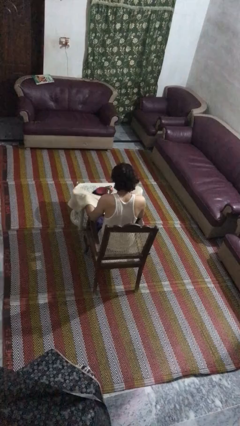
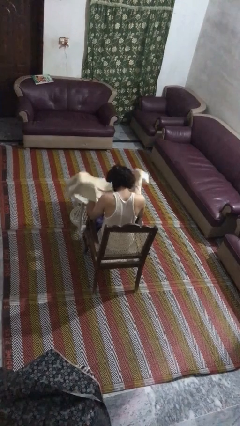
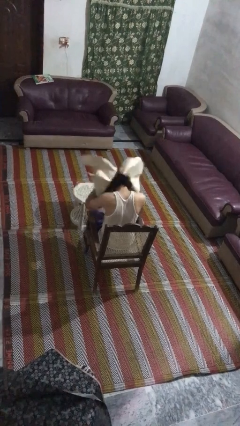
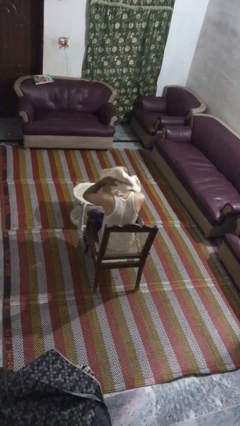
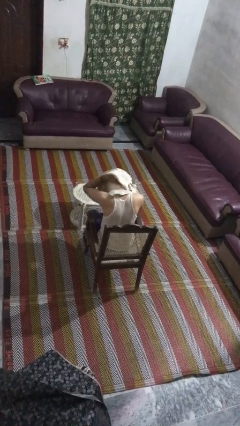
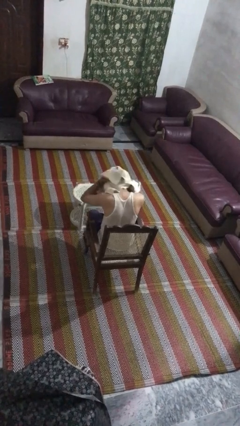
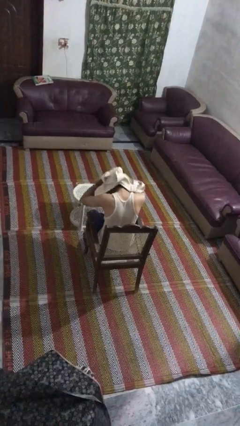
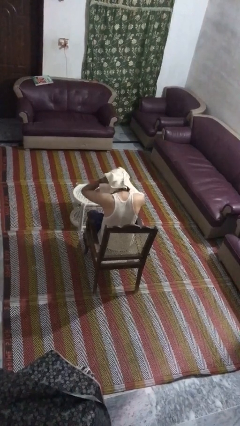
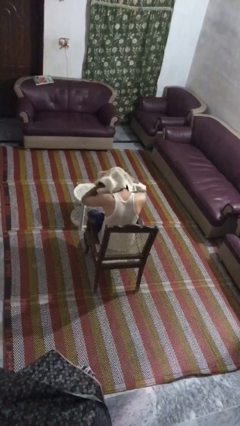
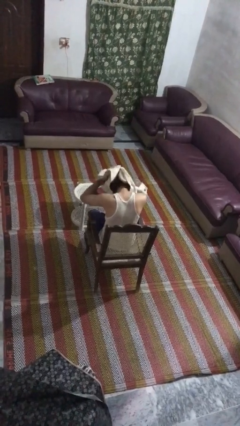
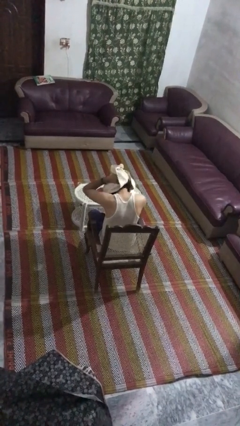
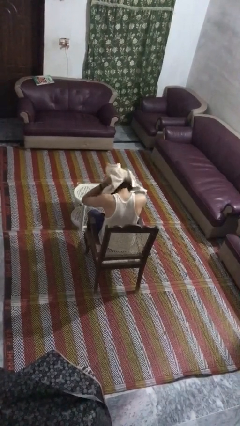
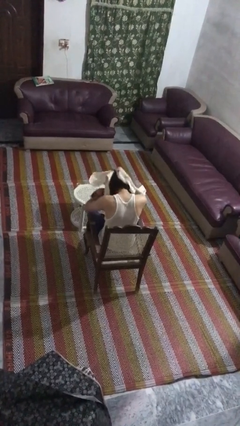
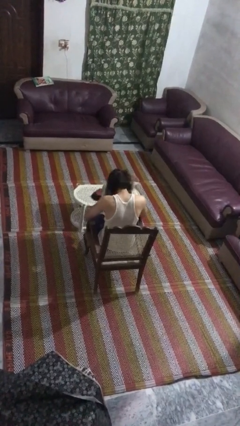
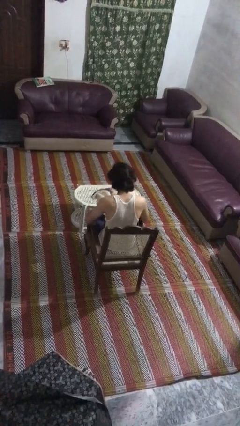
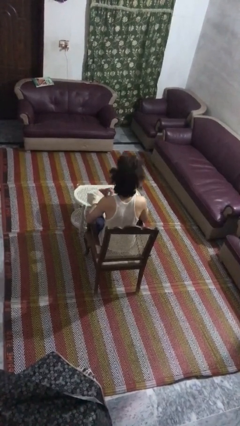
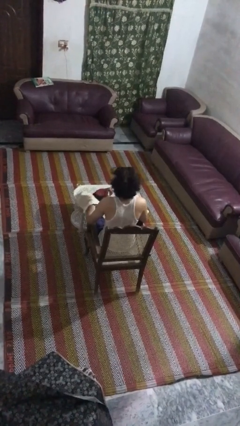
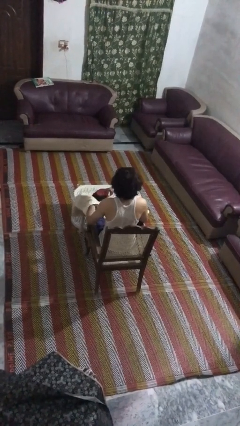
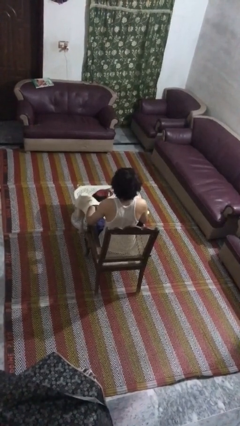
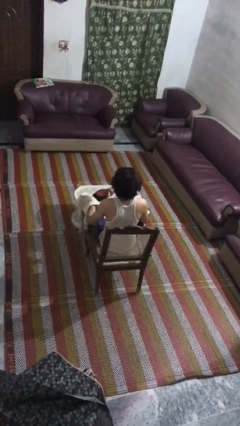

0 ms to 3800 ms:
person dries hair with towel

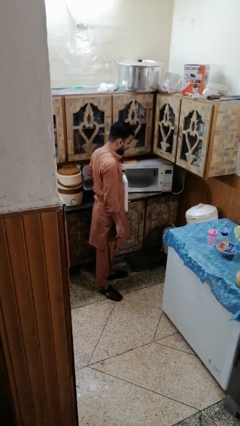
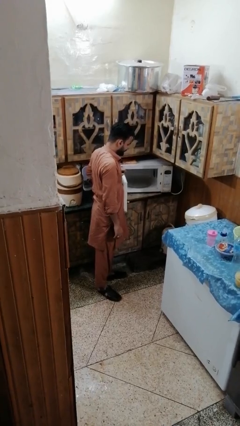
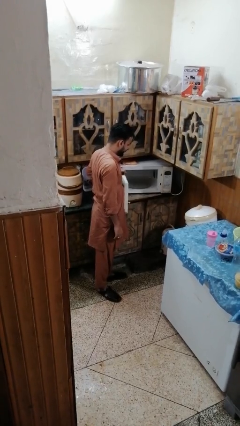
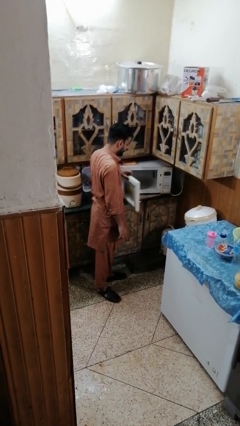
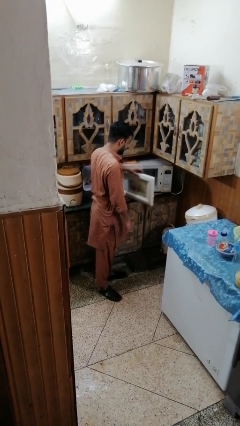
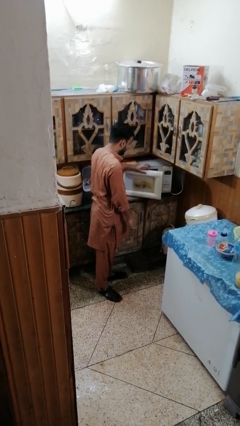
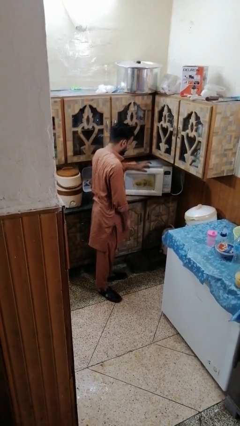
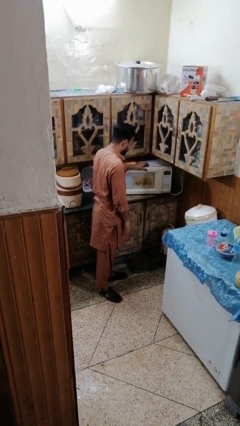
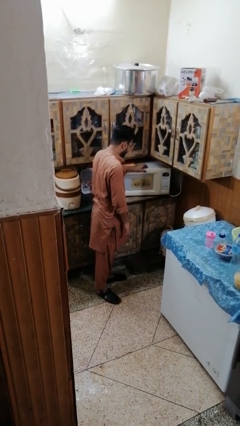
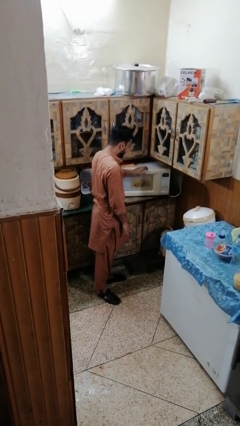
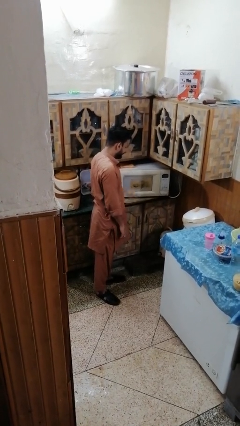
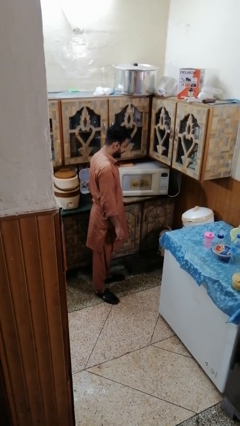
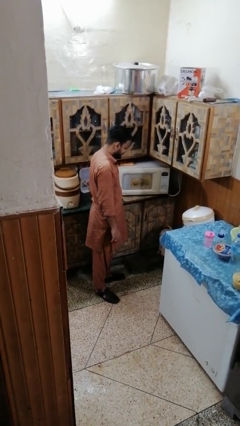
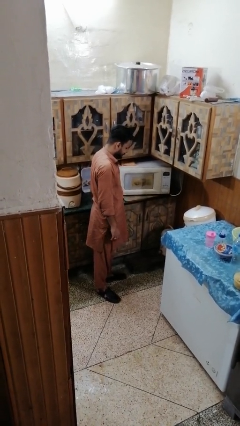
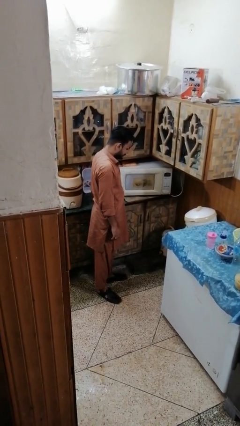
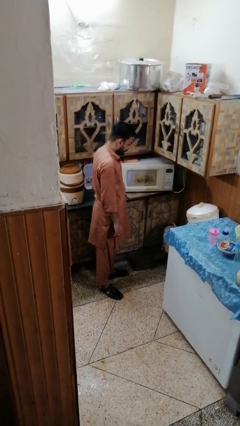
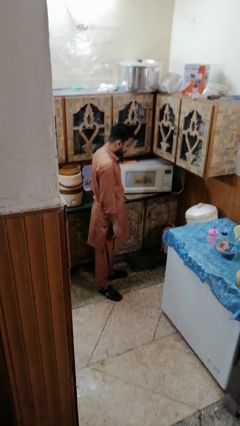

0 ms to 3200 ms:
person closes microwave

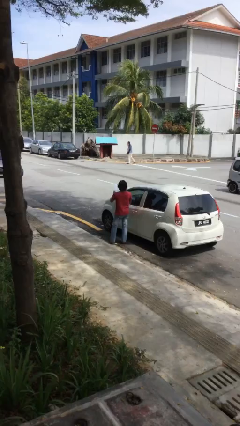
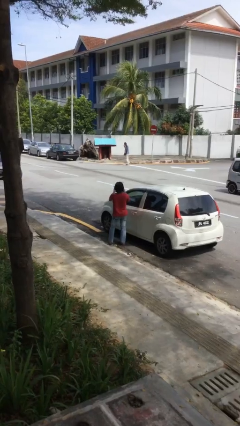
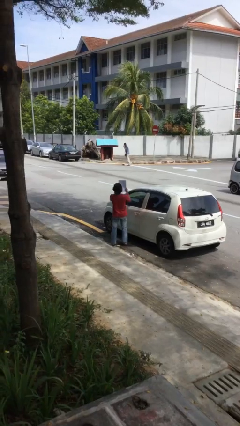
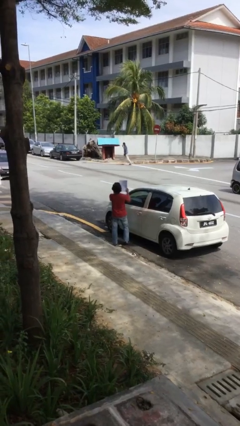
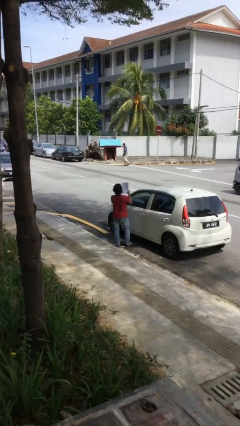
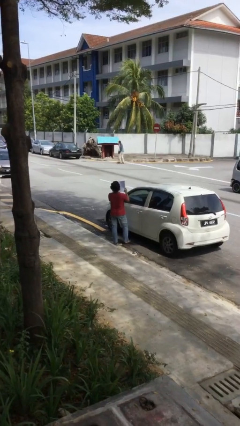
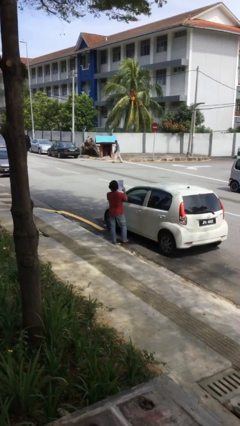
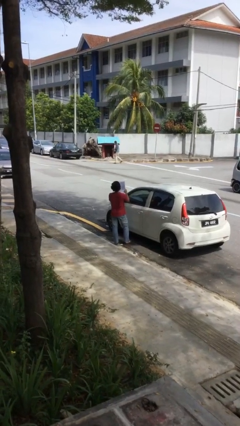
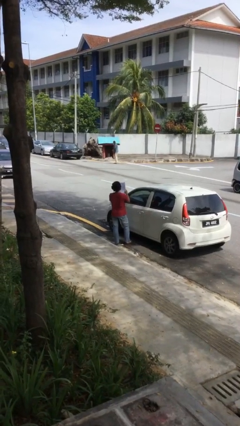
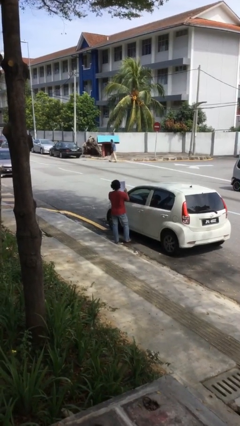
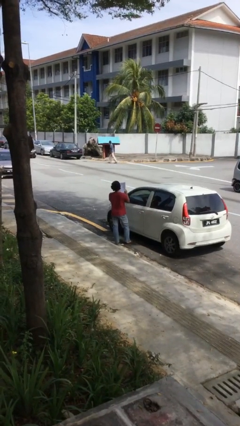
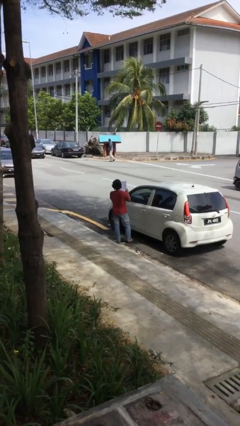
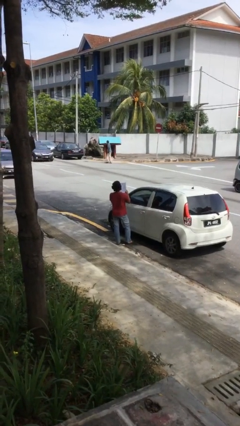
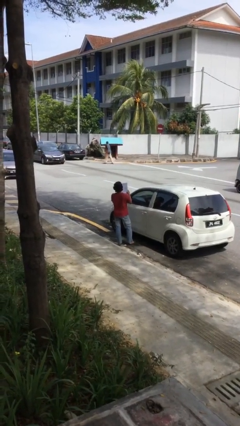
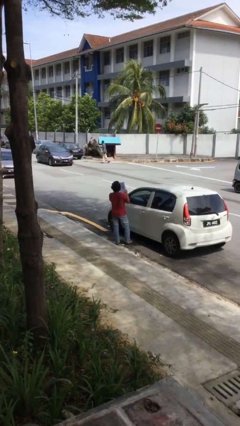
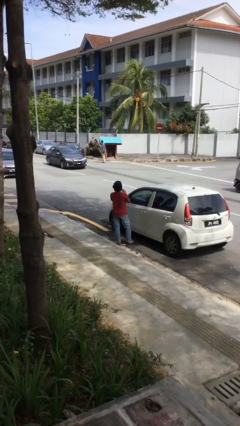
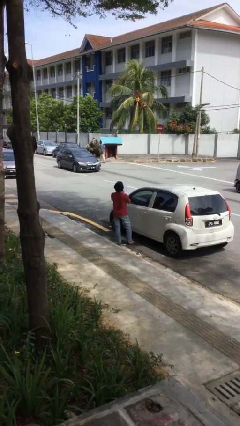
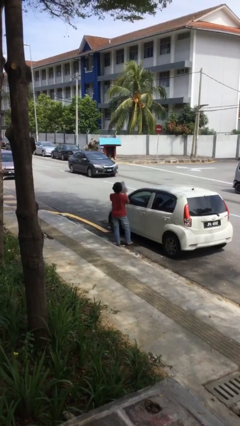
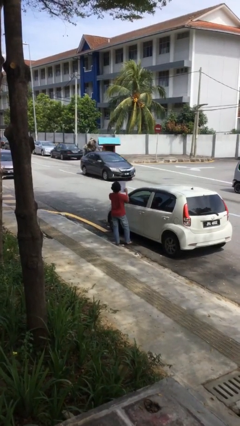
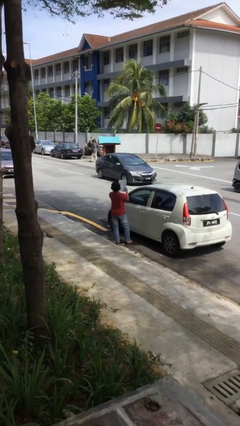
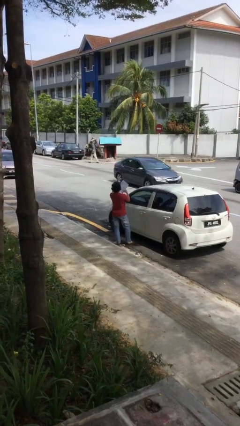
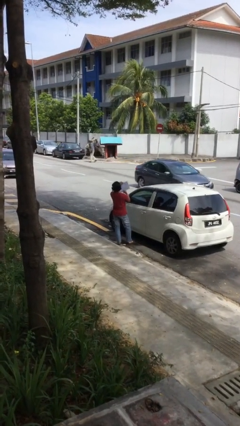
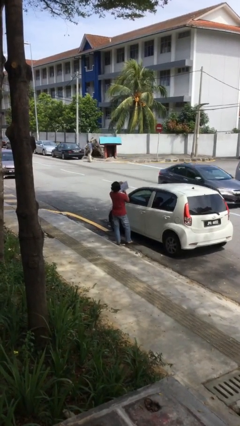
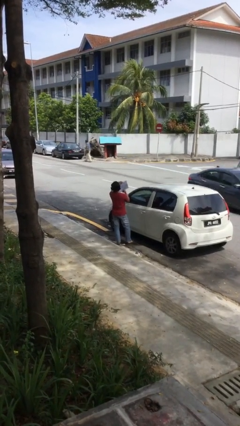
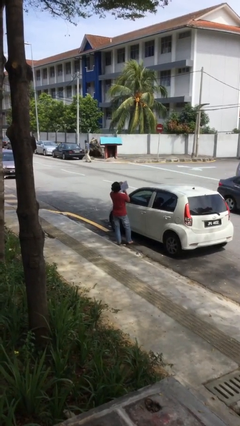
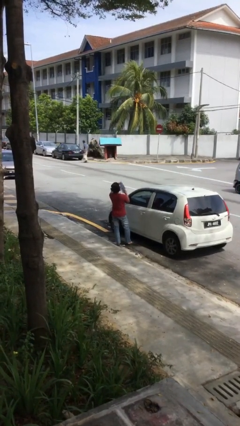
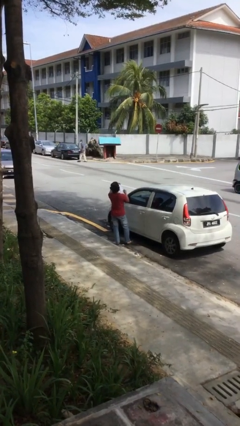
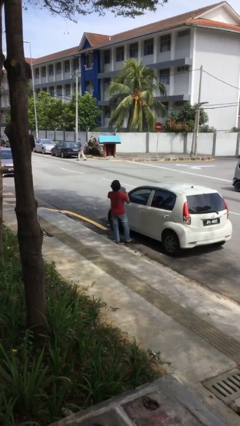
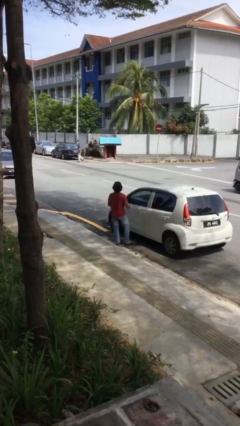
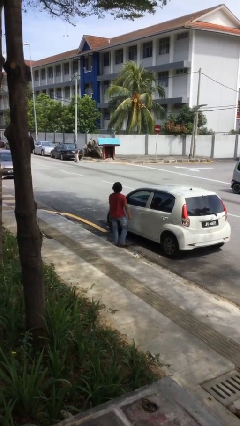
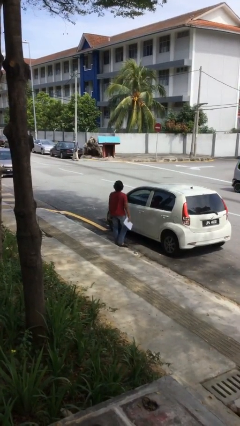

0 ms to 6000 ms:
person reads document

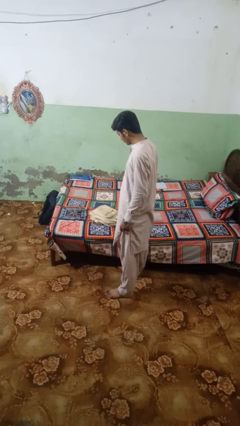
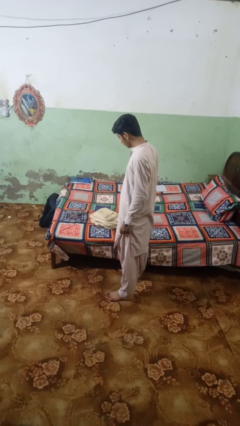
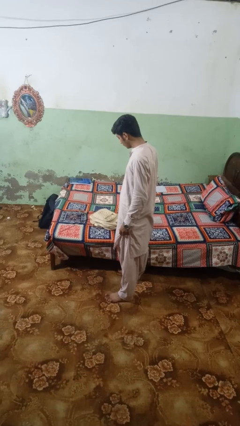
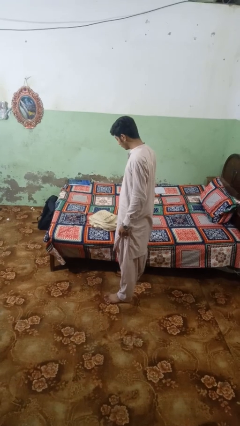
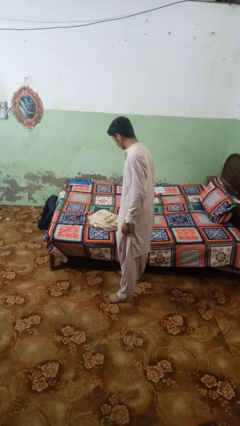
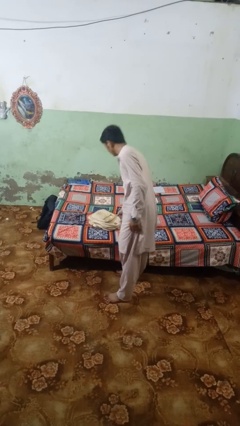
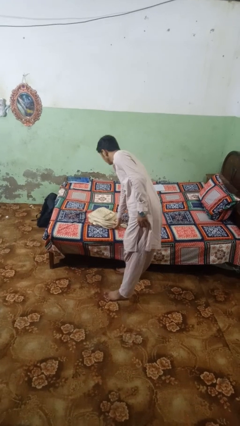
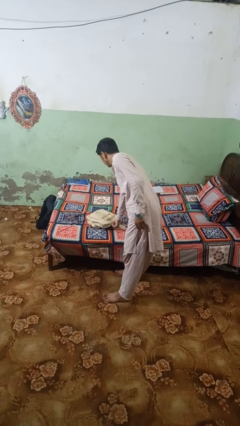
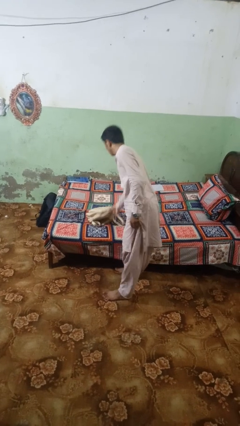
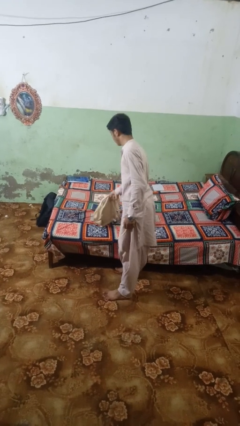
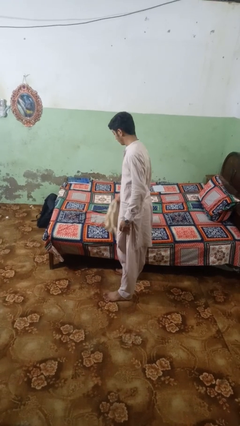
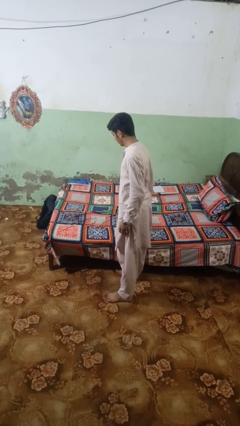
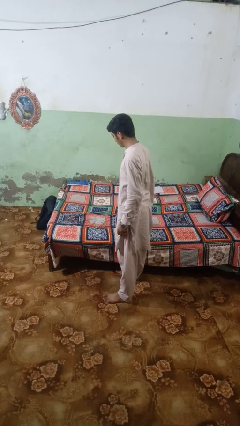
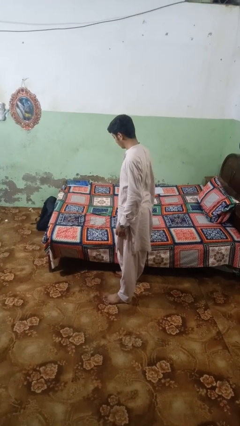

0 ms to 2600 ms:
person picks up object from bed

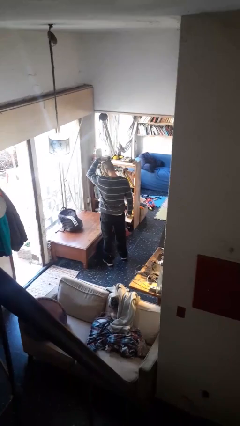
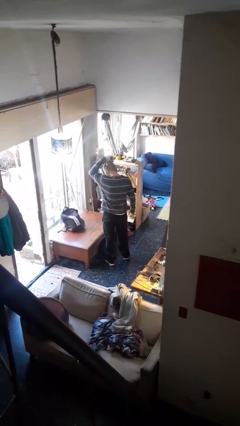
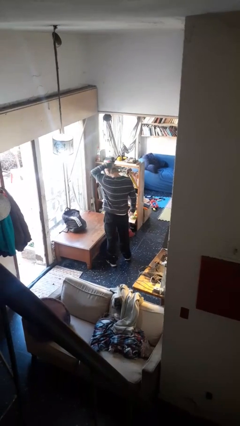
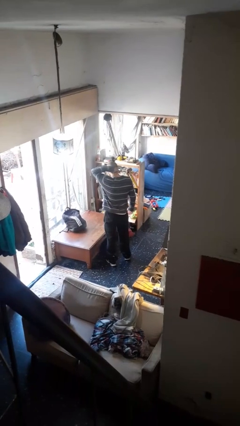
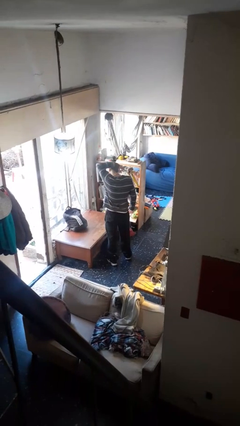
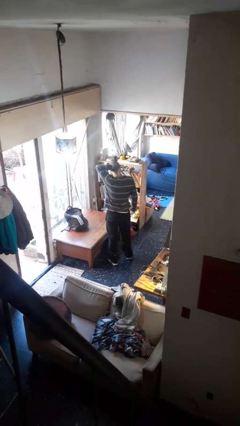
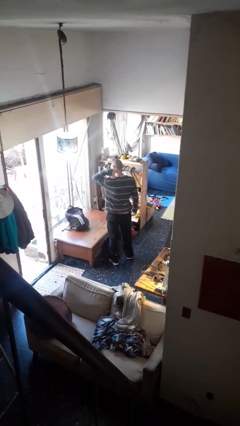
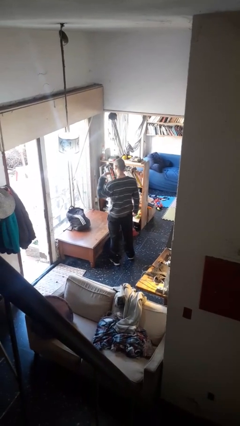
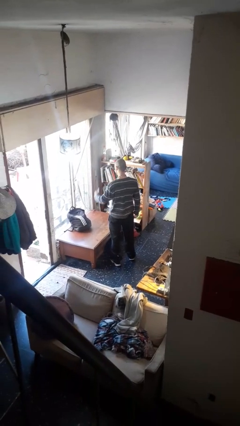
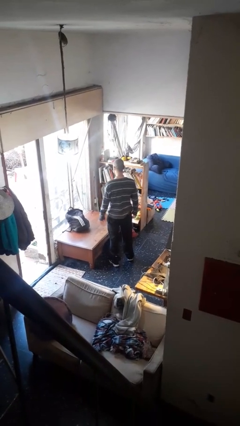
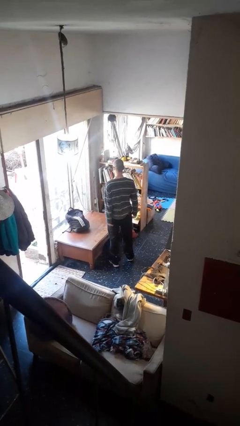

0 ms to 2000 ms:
person puts on necklace
